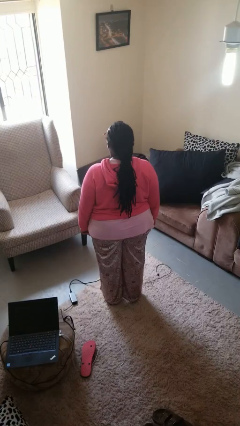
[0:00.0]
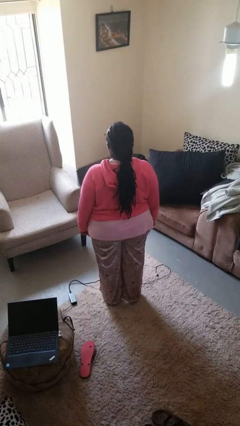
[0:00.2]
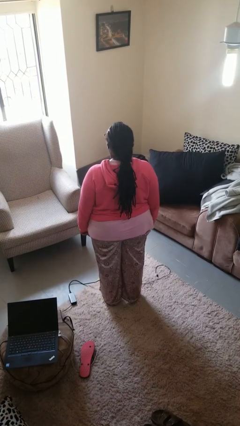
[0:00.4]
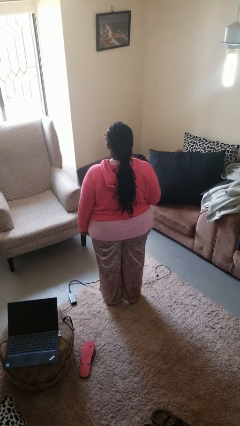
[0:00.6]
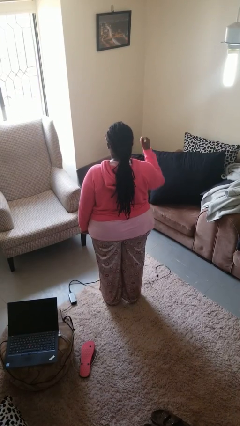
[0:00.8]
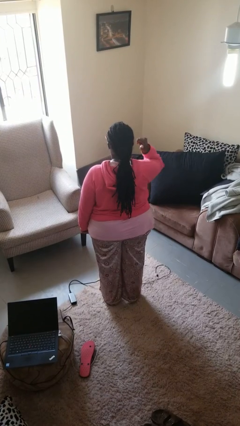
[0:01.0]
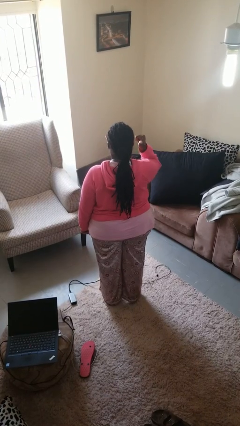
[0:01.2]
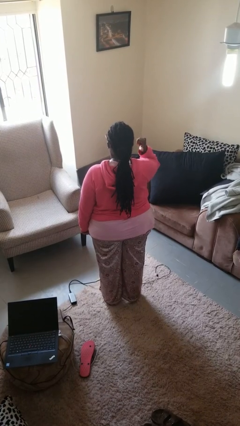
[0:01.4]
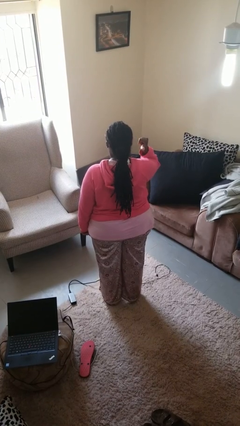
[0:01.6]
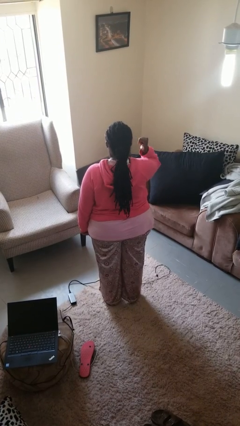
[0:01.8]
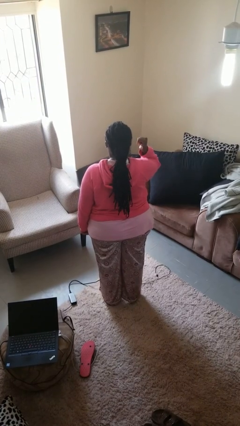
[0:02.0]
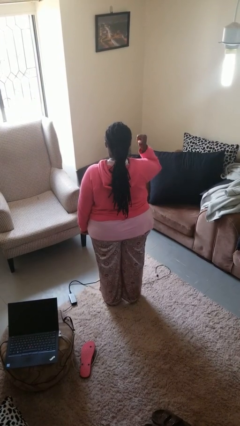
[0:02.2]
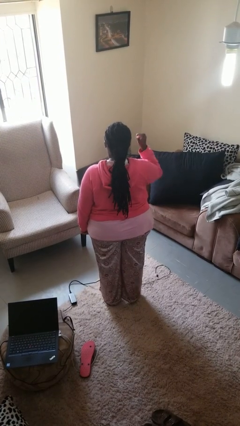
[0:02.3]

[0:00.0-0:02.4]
person gestures behind me

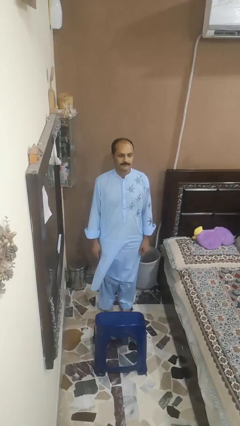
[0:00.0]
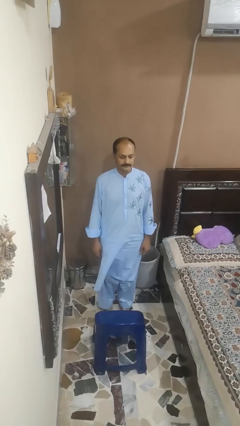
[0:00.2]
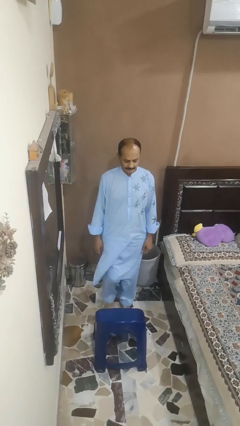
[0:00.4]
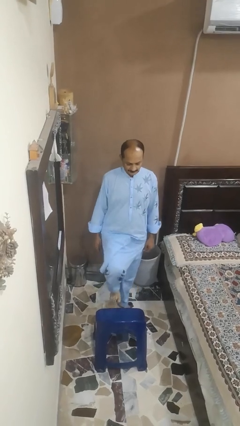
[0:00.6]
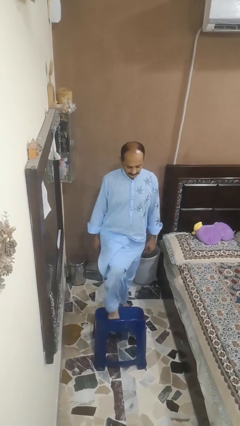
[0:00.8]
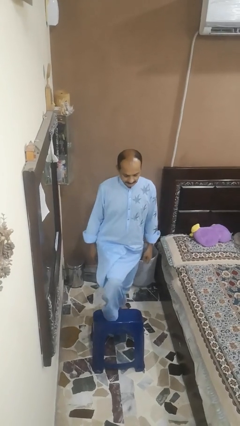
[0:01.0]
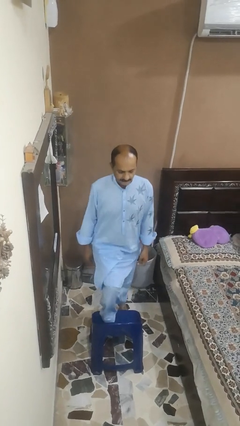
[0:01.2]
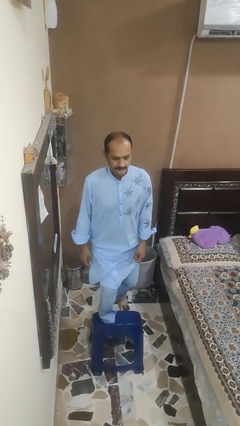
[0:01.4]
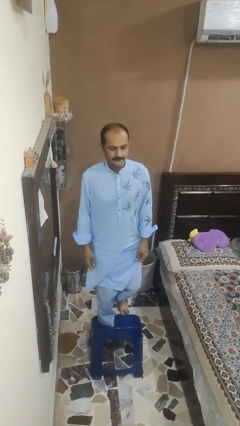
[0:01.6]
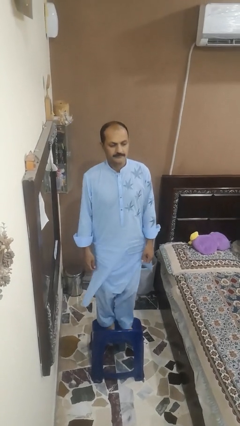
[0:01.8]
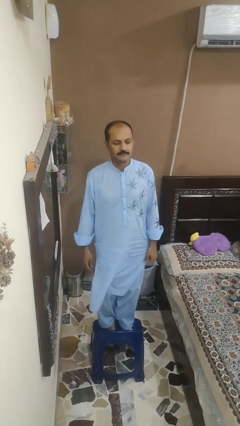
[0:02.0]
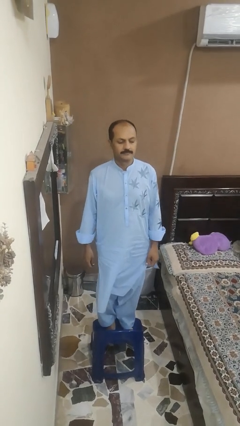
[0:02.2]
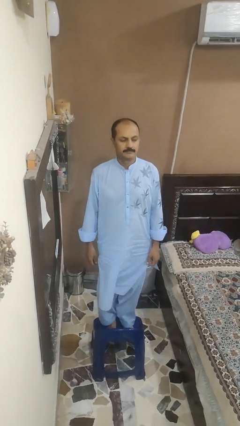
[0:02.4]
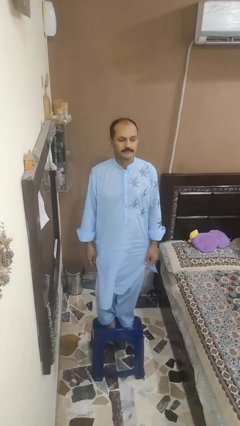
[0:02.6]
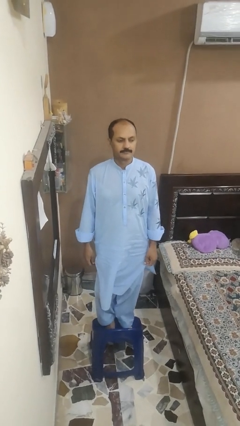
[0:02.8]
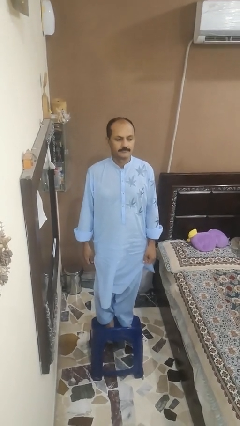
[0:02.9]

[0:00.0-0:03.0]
person climbs on chair

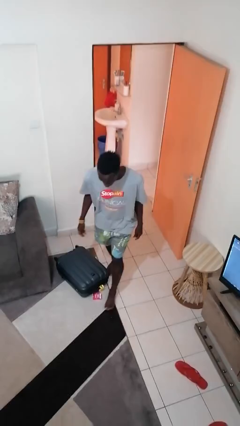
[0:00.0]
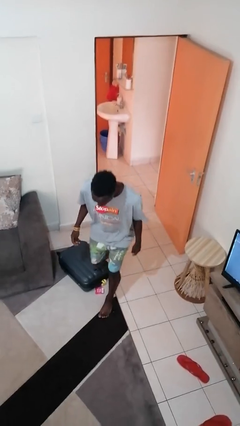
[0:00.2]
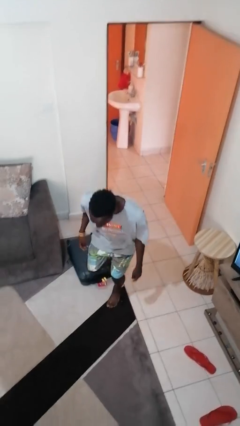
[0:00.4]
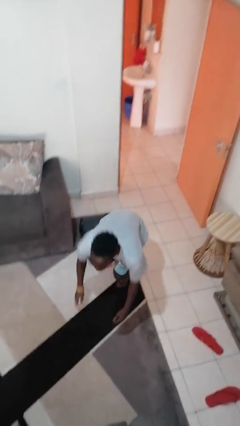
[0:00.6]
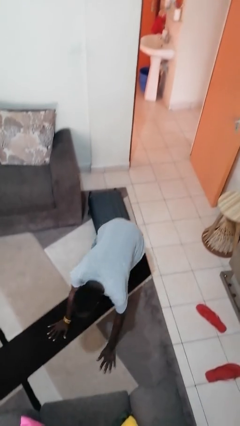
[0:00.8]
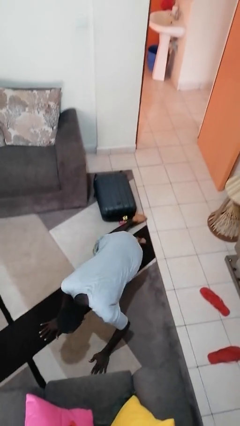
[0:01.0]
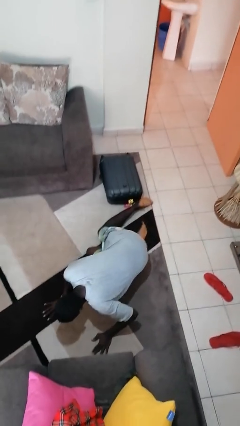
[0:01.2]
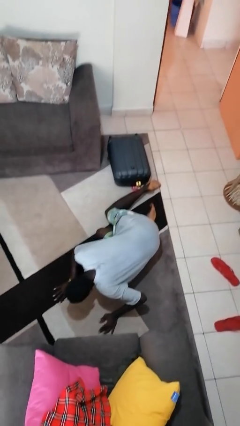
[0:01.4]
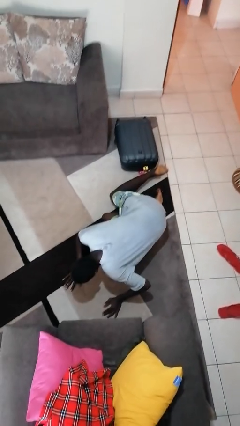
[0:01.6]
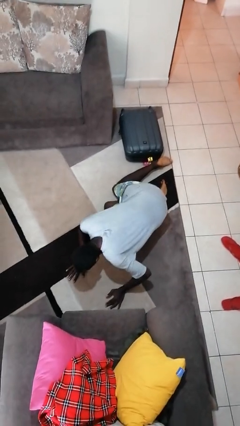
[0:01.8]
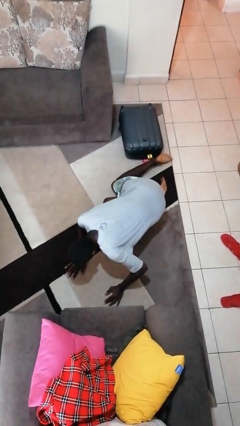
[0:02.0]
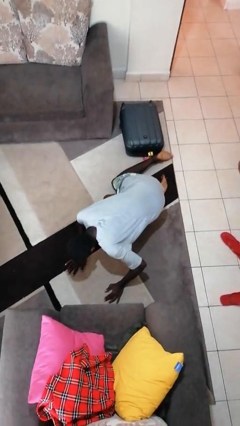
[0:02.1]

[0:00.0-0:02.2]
person trips on object on floor

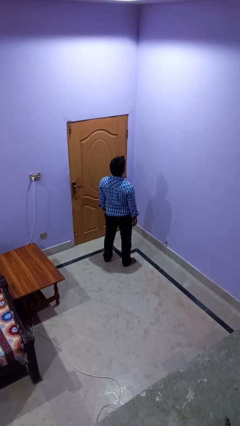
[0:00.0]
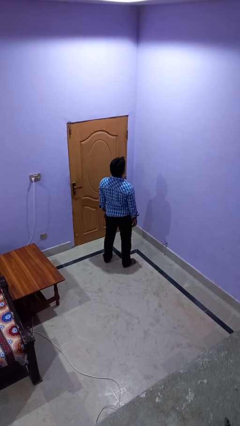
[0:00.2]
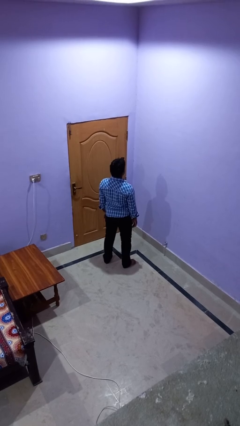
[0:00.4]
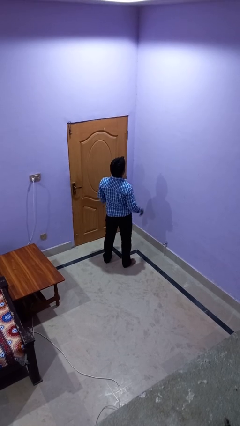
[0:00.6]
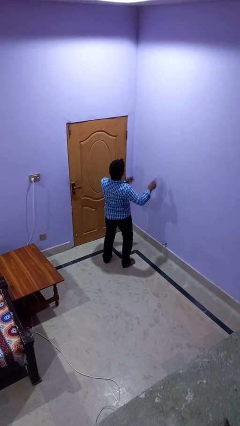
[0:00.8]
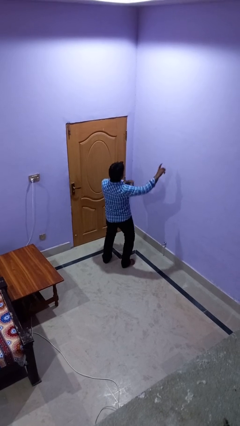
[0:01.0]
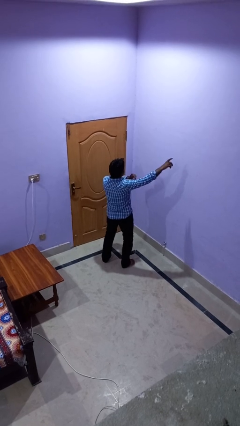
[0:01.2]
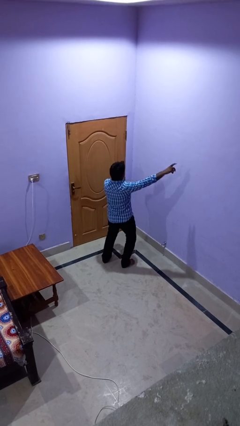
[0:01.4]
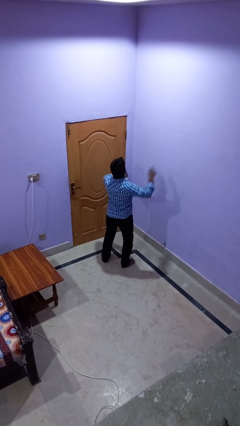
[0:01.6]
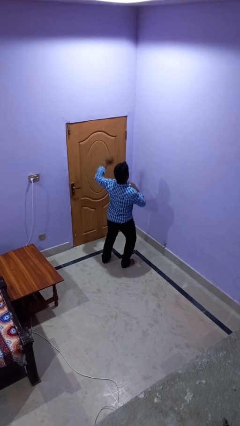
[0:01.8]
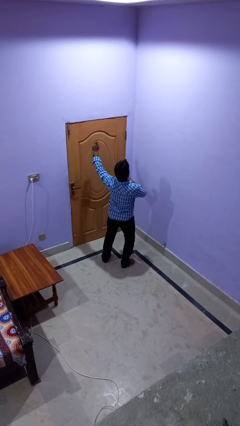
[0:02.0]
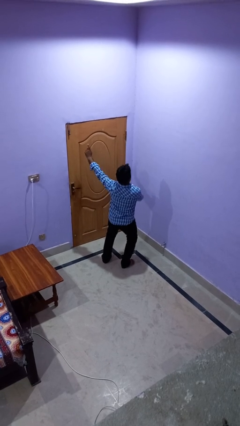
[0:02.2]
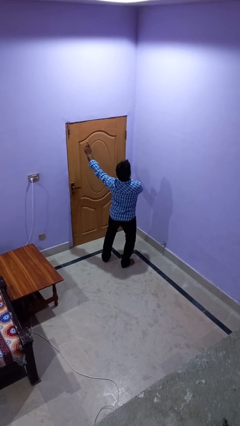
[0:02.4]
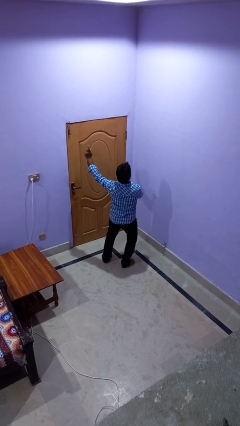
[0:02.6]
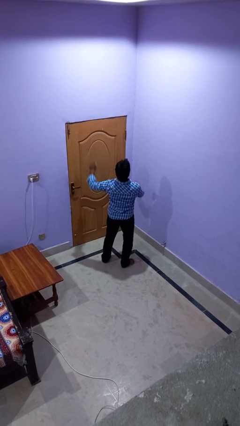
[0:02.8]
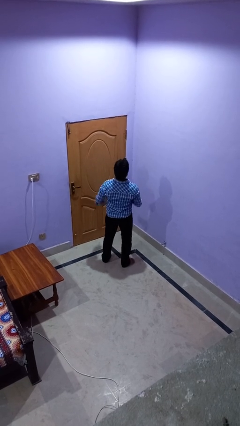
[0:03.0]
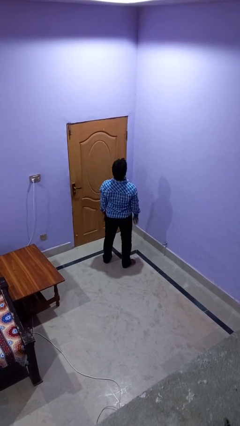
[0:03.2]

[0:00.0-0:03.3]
person dances in place

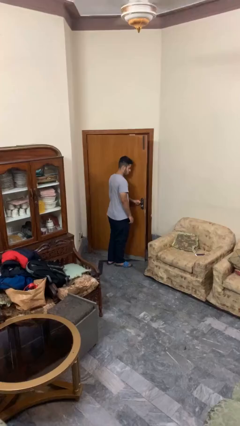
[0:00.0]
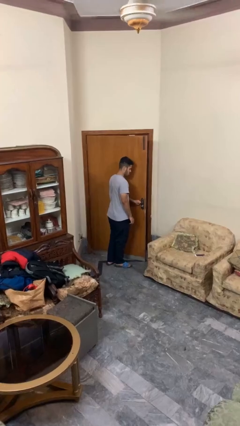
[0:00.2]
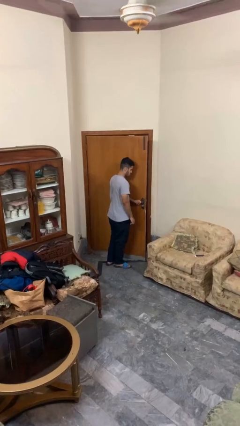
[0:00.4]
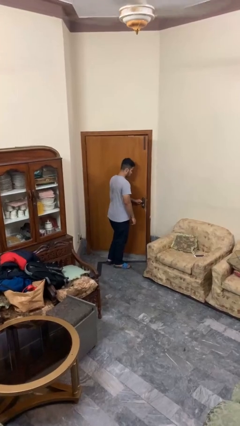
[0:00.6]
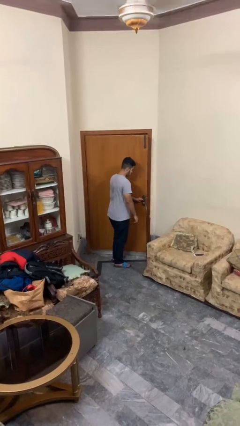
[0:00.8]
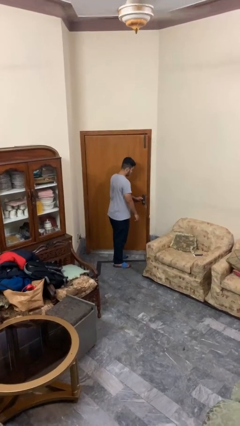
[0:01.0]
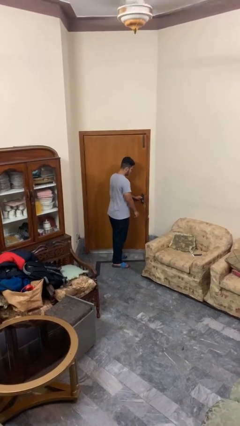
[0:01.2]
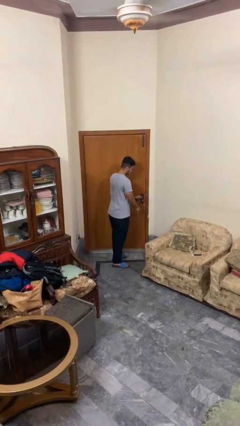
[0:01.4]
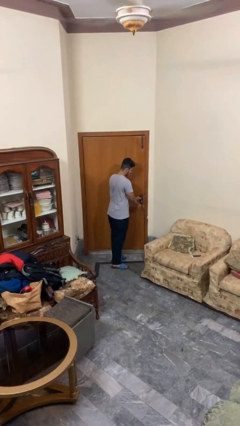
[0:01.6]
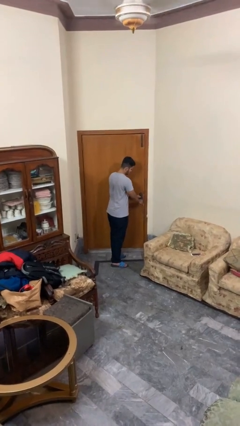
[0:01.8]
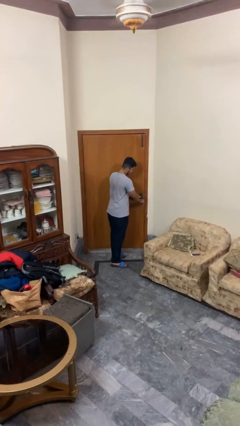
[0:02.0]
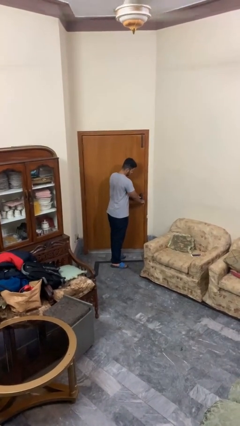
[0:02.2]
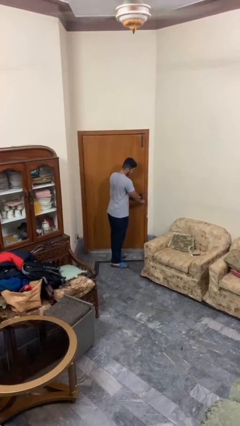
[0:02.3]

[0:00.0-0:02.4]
person closes facility door

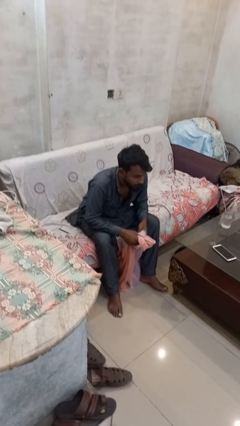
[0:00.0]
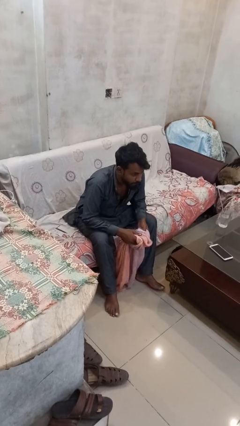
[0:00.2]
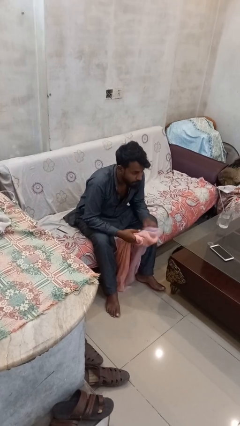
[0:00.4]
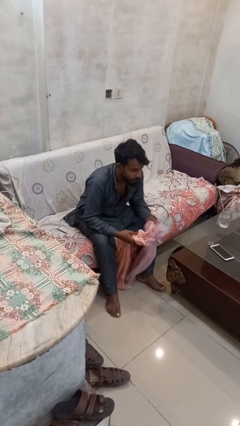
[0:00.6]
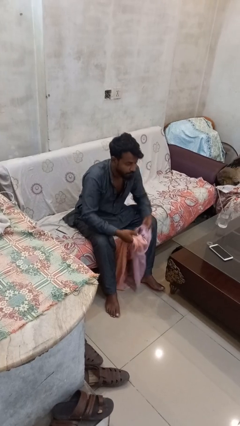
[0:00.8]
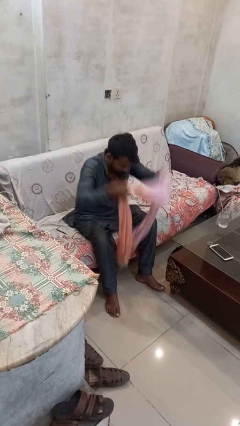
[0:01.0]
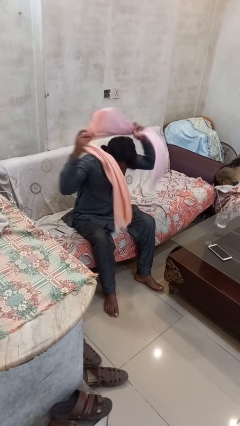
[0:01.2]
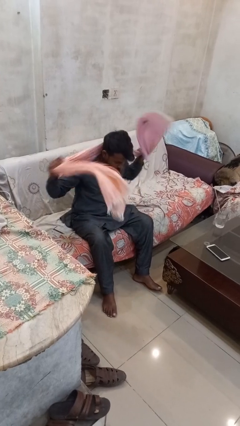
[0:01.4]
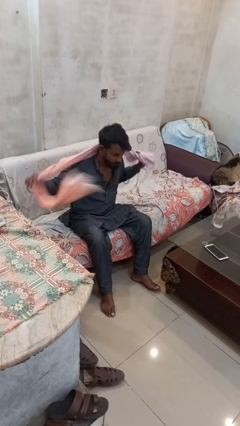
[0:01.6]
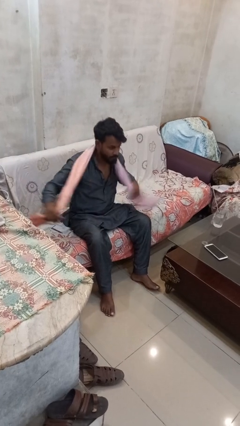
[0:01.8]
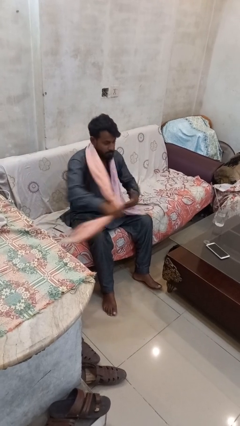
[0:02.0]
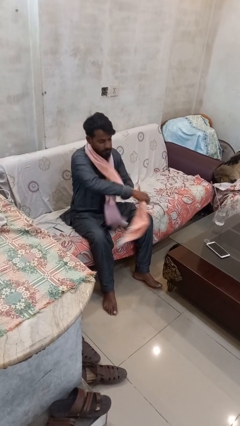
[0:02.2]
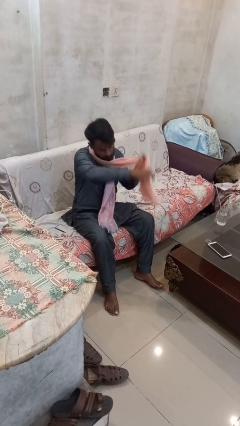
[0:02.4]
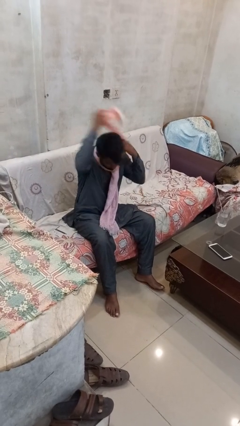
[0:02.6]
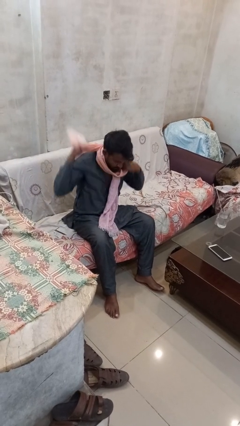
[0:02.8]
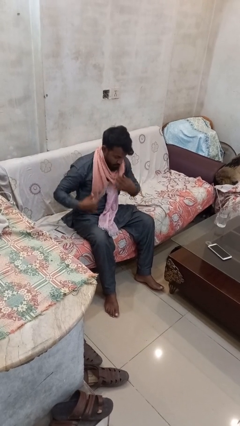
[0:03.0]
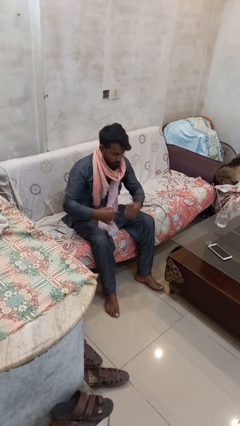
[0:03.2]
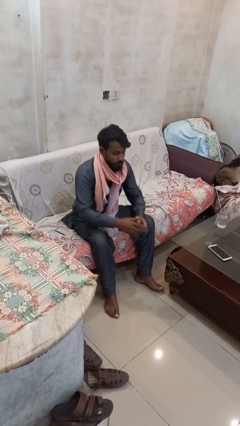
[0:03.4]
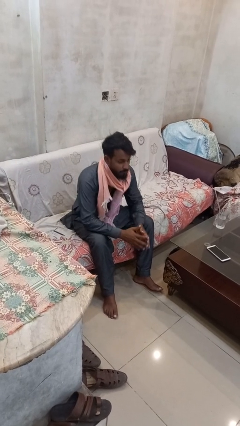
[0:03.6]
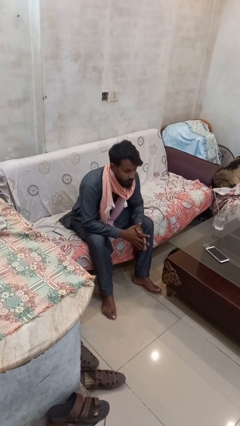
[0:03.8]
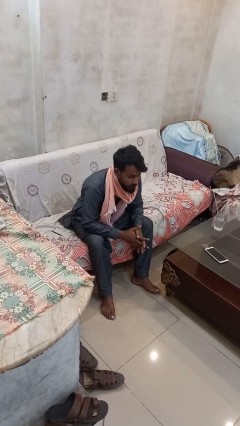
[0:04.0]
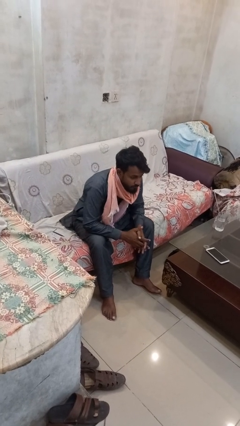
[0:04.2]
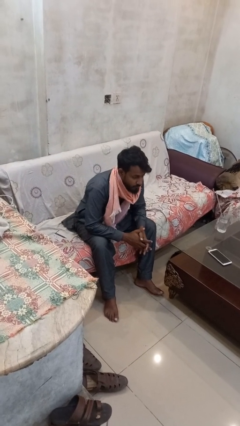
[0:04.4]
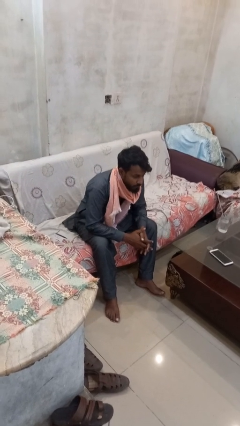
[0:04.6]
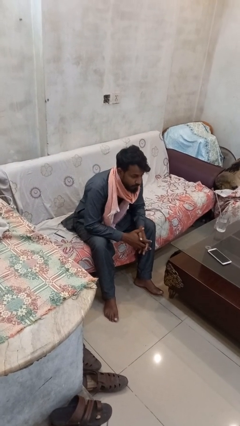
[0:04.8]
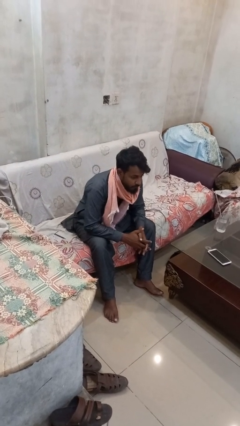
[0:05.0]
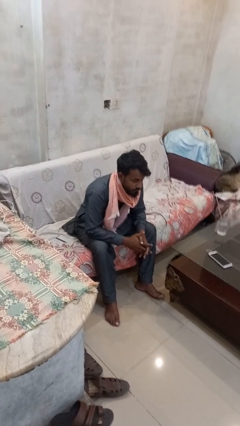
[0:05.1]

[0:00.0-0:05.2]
person puts on scarf
